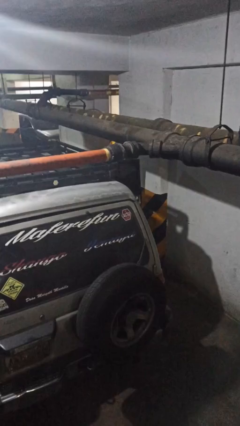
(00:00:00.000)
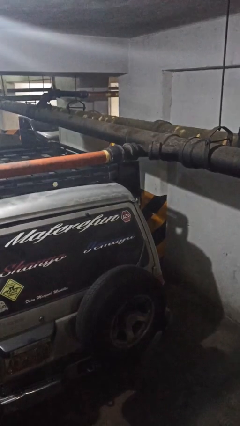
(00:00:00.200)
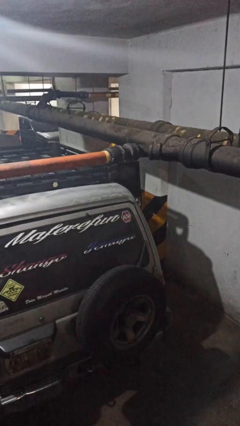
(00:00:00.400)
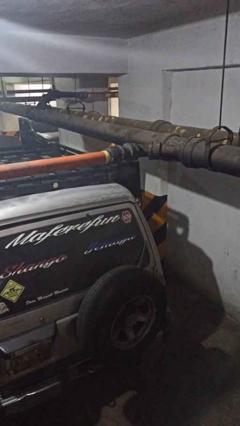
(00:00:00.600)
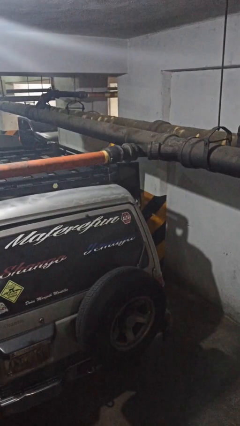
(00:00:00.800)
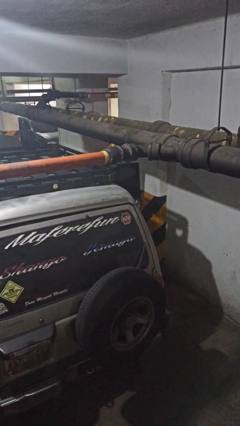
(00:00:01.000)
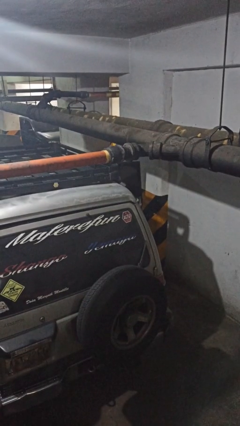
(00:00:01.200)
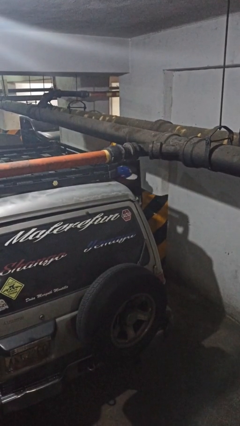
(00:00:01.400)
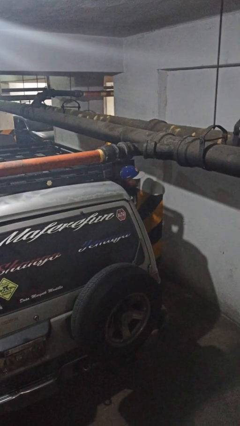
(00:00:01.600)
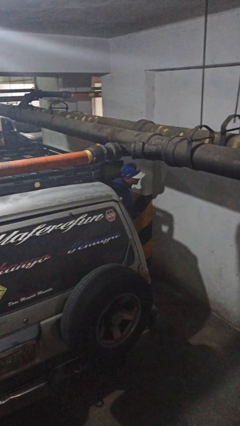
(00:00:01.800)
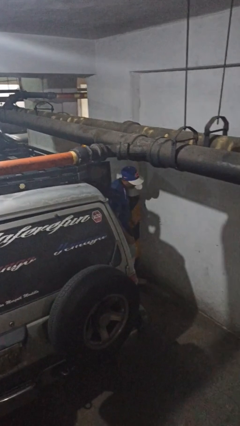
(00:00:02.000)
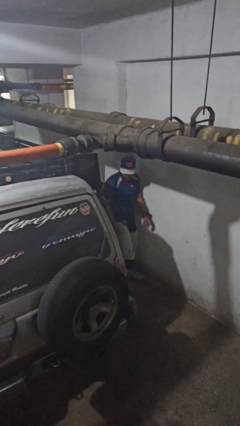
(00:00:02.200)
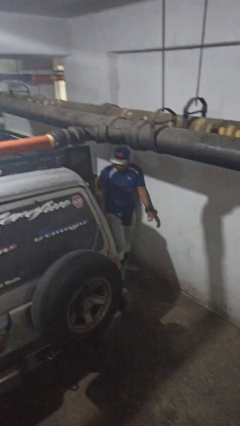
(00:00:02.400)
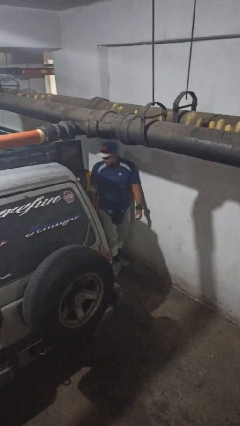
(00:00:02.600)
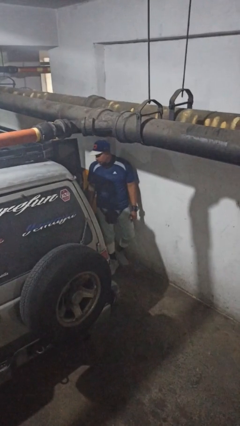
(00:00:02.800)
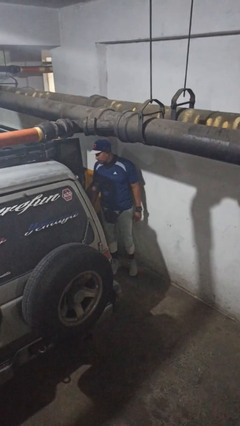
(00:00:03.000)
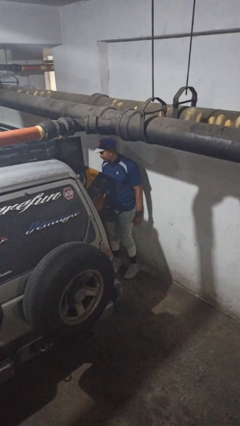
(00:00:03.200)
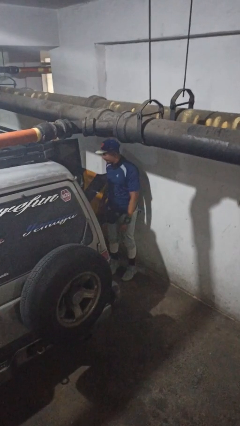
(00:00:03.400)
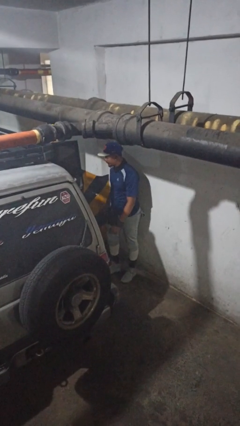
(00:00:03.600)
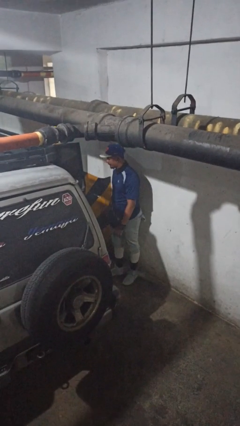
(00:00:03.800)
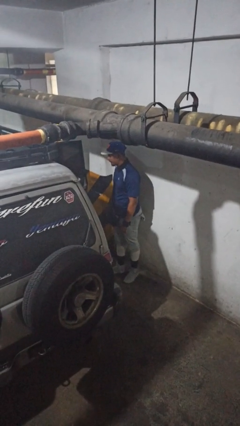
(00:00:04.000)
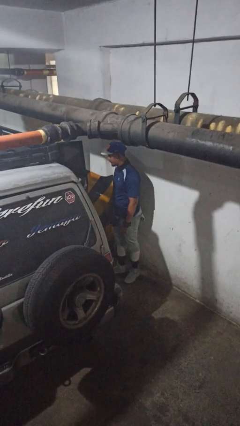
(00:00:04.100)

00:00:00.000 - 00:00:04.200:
person exits car

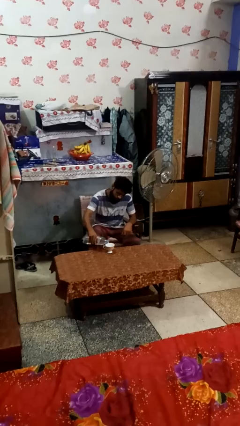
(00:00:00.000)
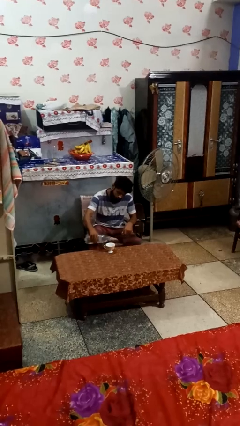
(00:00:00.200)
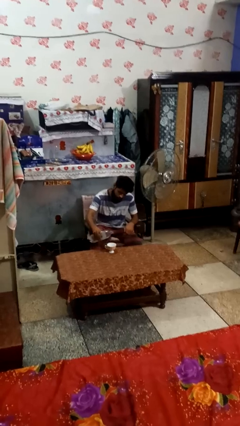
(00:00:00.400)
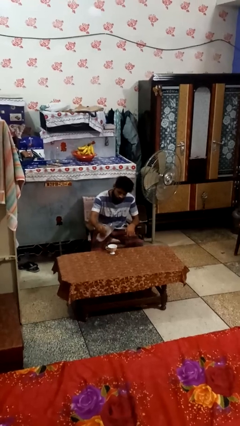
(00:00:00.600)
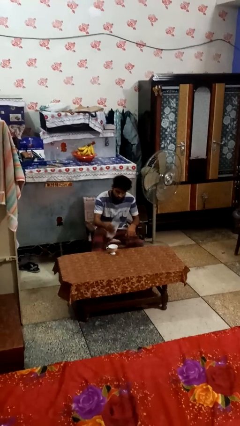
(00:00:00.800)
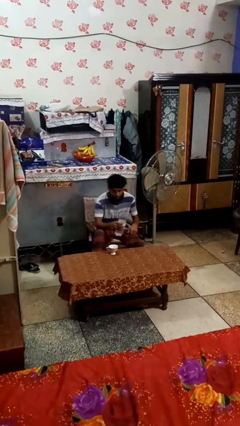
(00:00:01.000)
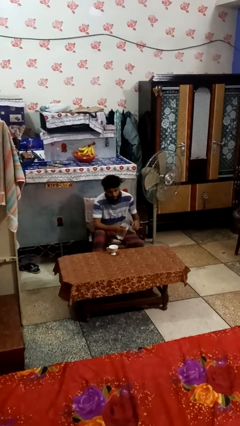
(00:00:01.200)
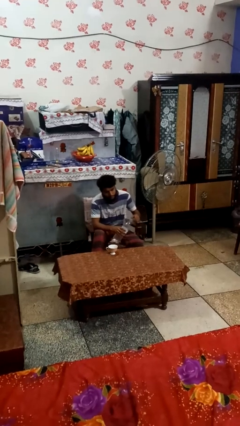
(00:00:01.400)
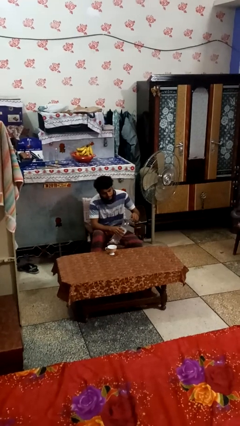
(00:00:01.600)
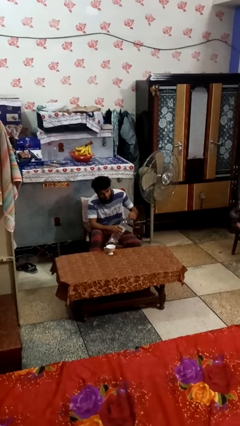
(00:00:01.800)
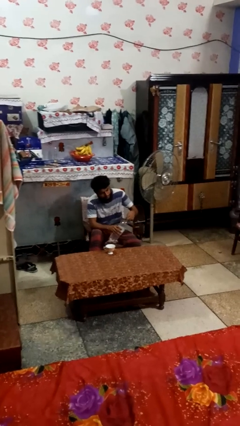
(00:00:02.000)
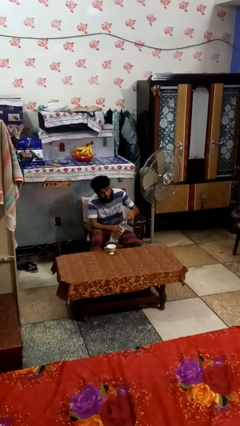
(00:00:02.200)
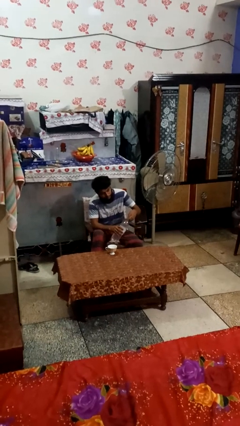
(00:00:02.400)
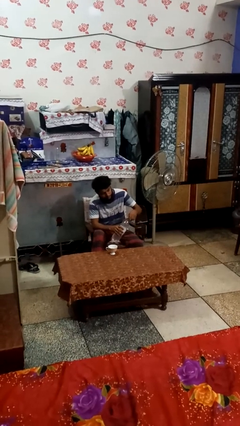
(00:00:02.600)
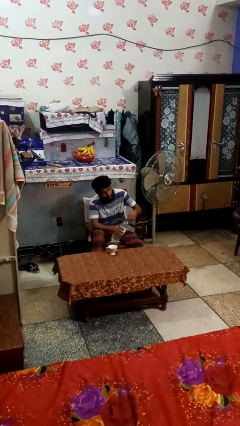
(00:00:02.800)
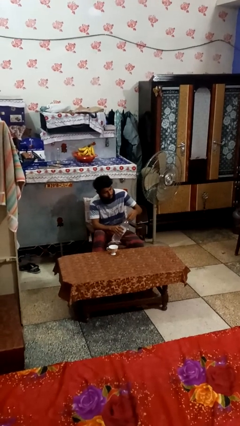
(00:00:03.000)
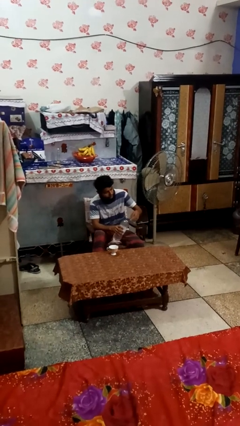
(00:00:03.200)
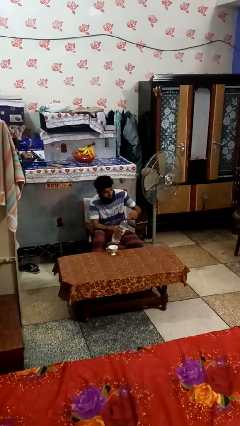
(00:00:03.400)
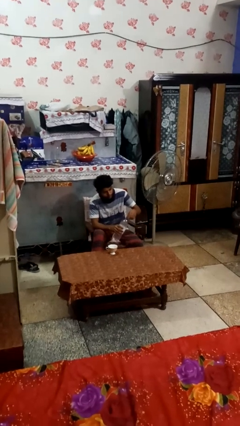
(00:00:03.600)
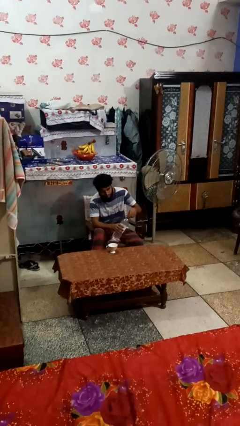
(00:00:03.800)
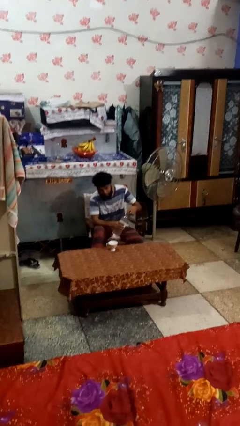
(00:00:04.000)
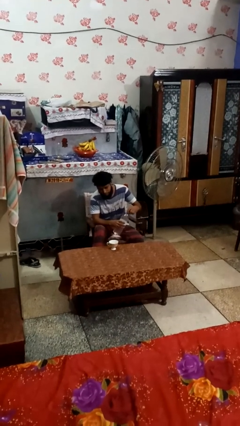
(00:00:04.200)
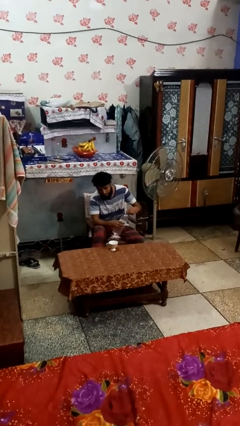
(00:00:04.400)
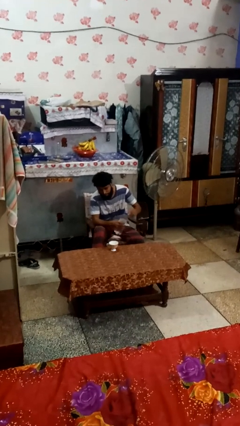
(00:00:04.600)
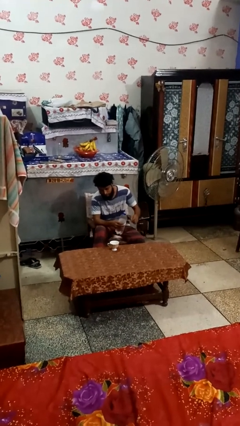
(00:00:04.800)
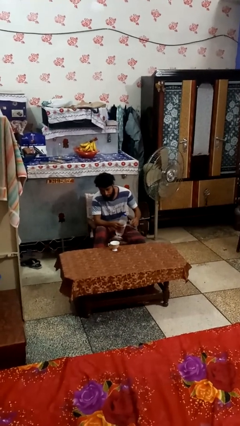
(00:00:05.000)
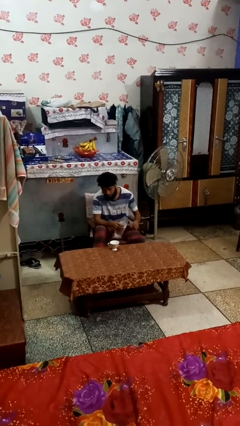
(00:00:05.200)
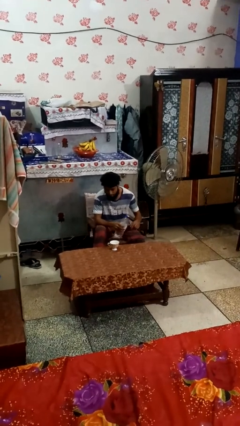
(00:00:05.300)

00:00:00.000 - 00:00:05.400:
person screws lid to bottle

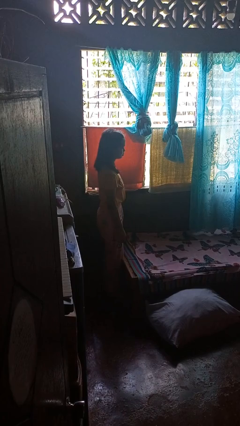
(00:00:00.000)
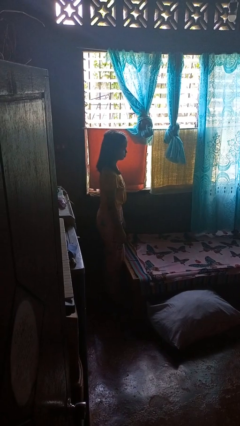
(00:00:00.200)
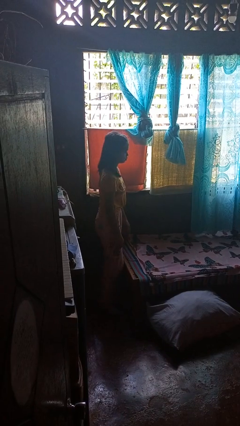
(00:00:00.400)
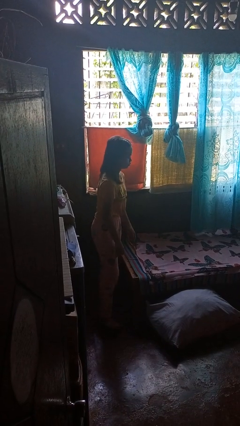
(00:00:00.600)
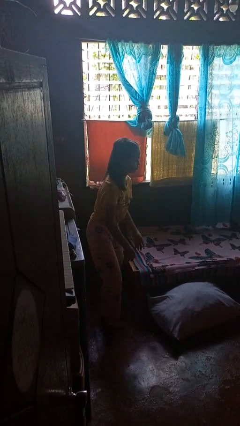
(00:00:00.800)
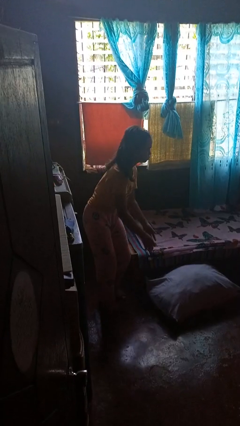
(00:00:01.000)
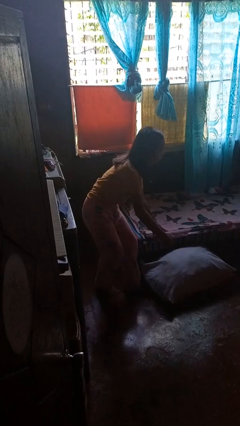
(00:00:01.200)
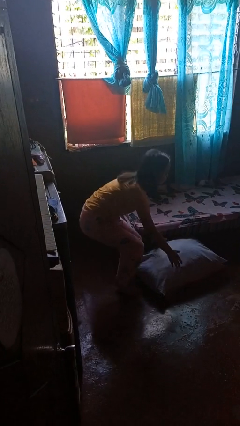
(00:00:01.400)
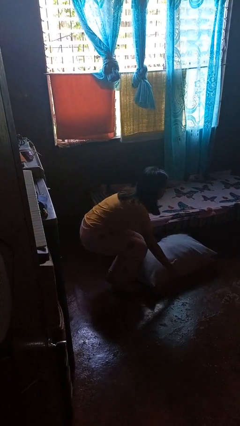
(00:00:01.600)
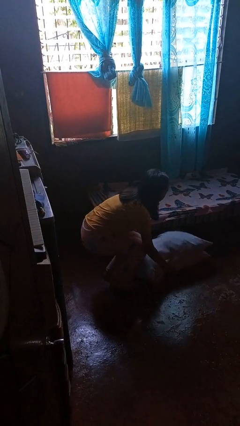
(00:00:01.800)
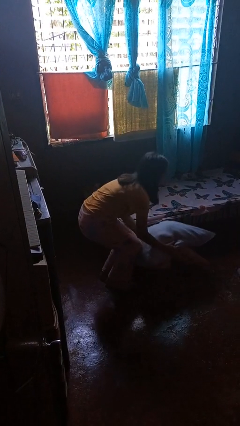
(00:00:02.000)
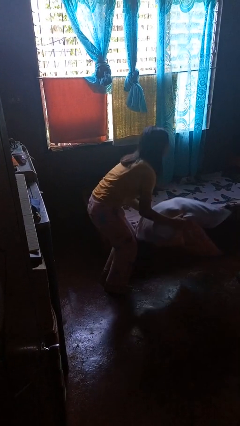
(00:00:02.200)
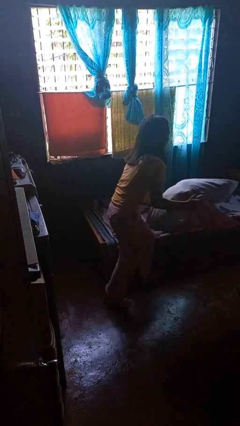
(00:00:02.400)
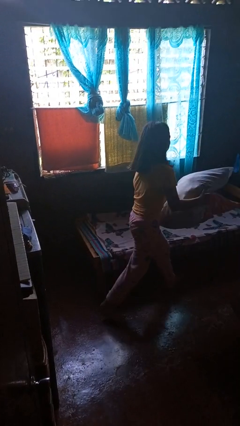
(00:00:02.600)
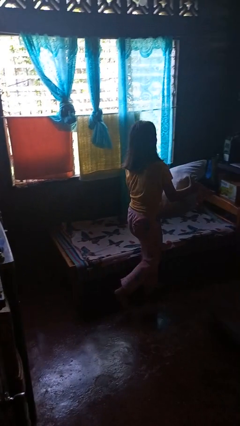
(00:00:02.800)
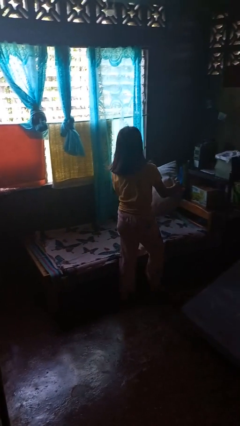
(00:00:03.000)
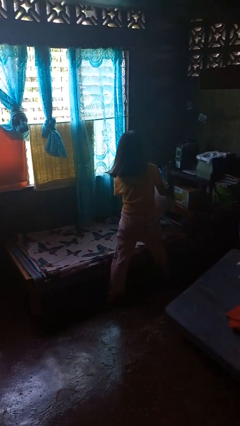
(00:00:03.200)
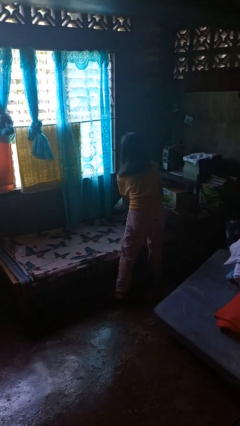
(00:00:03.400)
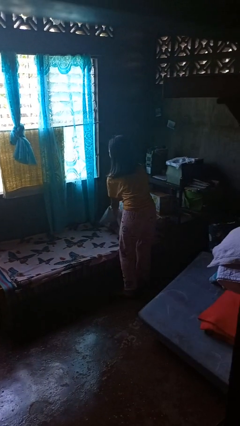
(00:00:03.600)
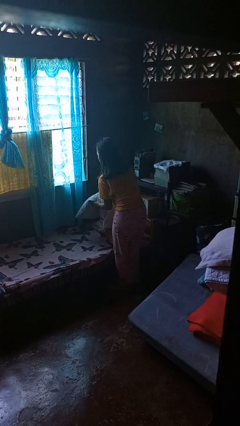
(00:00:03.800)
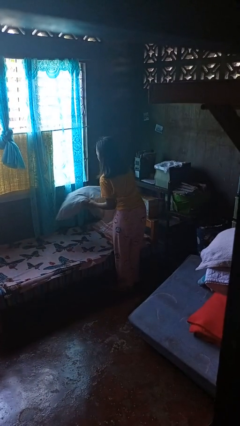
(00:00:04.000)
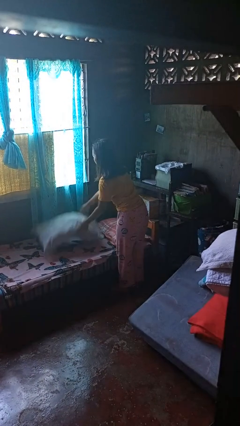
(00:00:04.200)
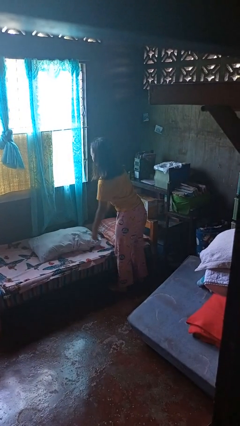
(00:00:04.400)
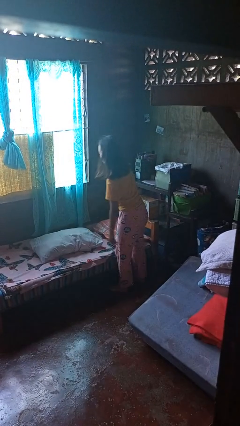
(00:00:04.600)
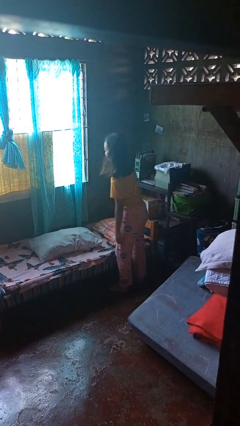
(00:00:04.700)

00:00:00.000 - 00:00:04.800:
person makes bed

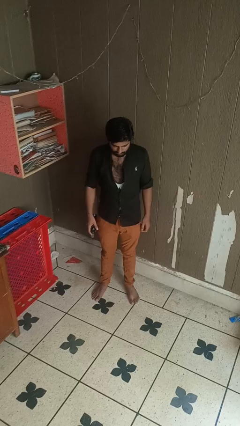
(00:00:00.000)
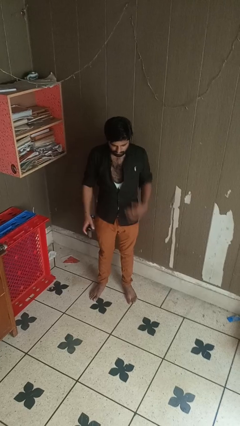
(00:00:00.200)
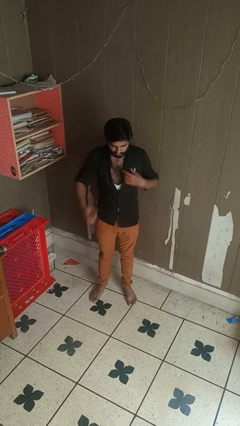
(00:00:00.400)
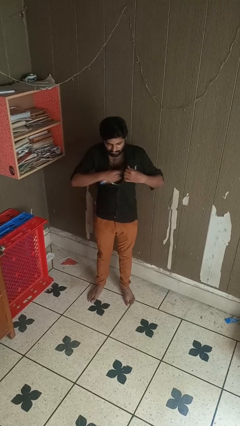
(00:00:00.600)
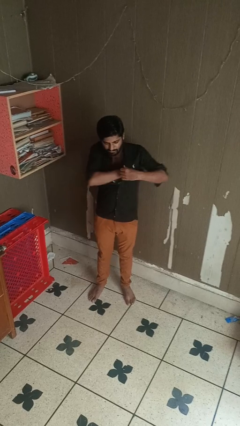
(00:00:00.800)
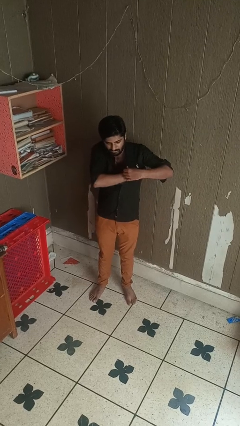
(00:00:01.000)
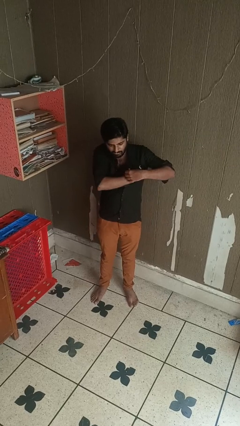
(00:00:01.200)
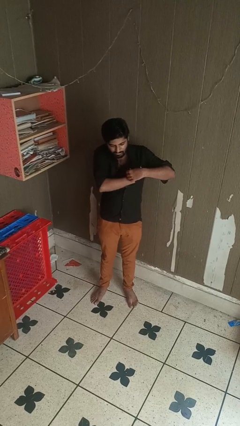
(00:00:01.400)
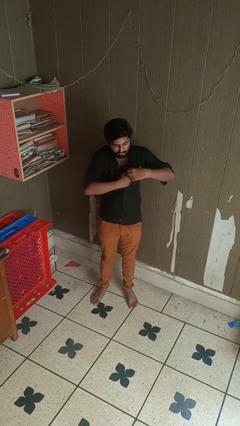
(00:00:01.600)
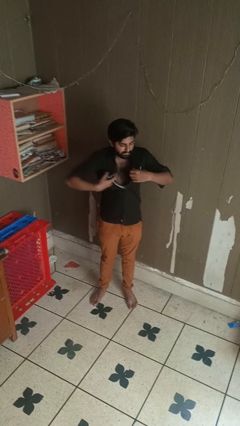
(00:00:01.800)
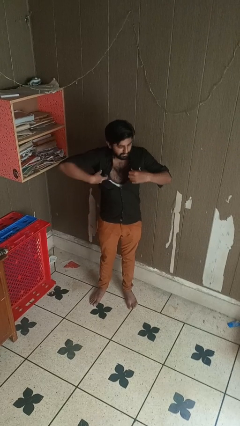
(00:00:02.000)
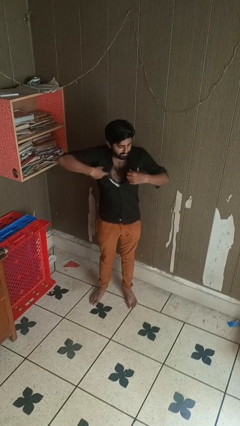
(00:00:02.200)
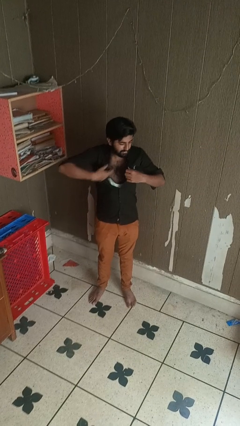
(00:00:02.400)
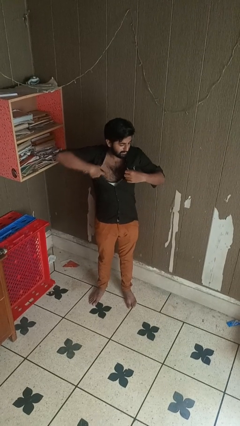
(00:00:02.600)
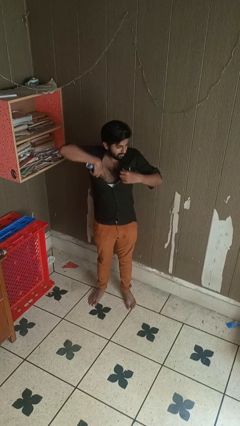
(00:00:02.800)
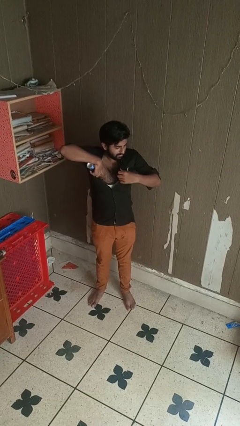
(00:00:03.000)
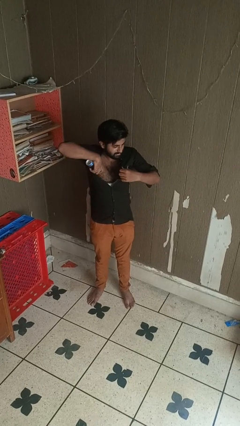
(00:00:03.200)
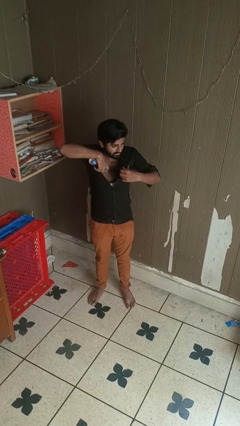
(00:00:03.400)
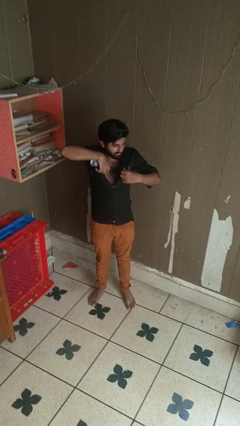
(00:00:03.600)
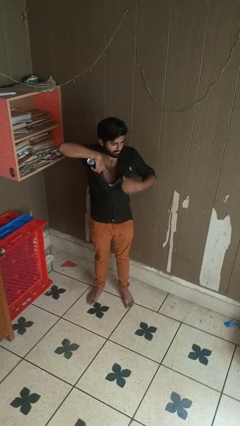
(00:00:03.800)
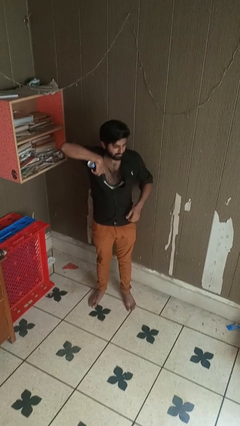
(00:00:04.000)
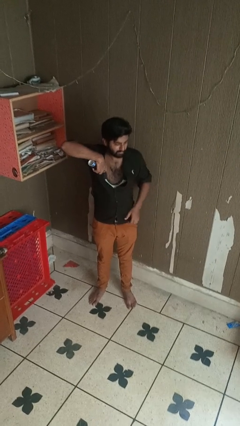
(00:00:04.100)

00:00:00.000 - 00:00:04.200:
person applies deodorant
